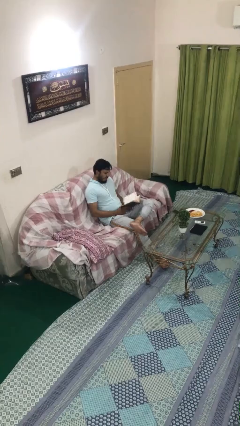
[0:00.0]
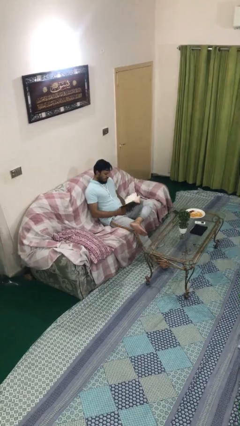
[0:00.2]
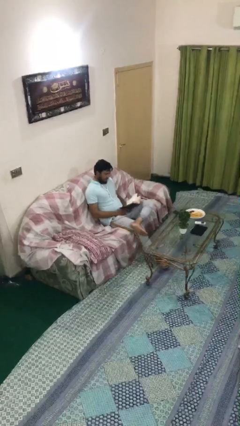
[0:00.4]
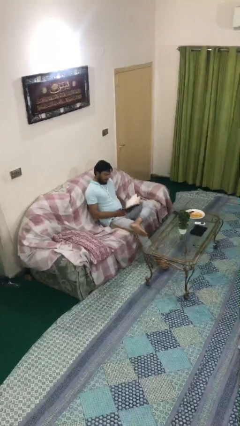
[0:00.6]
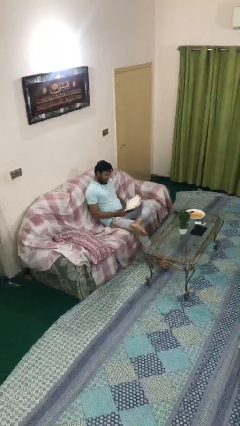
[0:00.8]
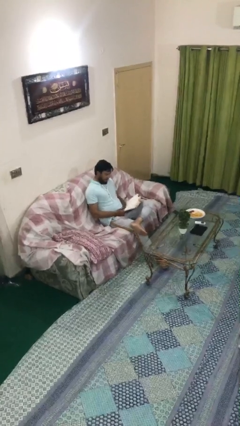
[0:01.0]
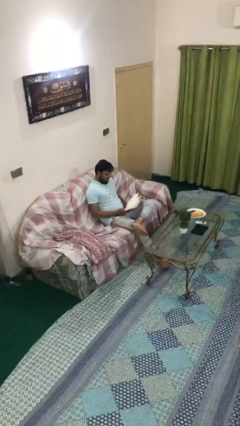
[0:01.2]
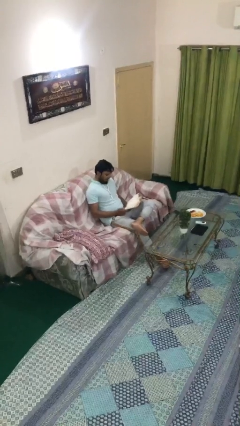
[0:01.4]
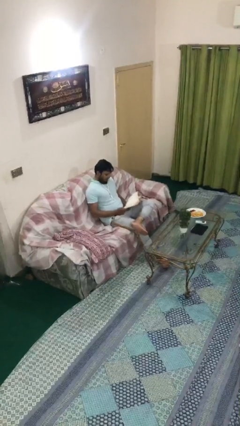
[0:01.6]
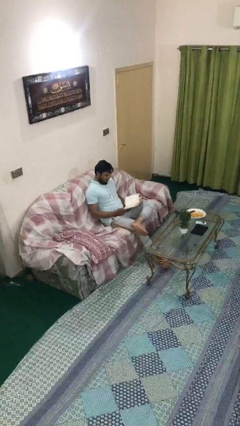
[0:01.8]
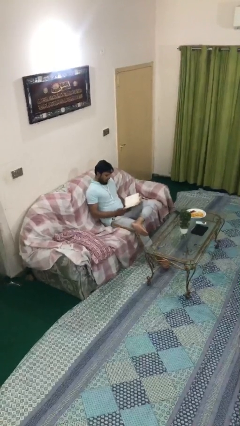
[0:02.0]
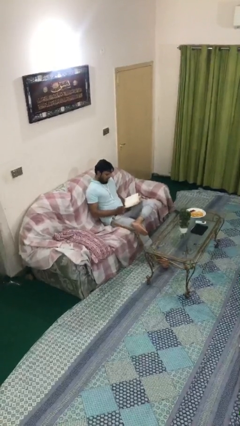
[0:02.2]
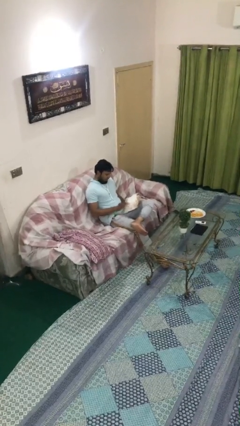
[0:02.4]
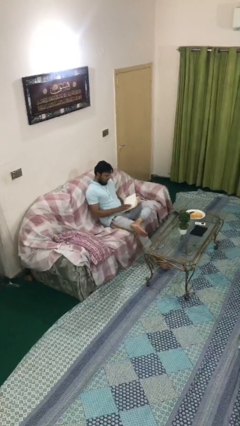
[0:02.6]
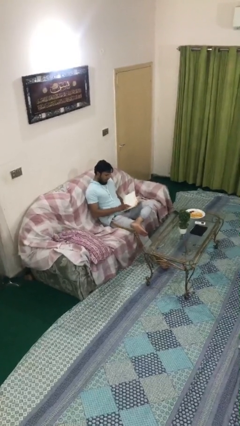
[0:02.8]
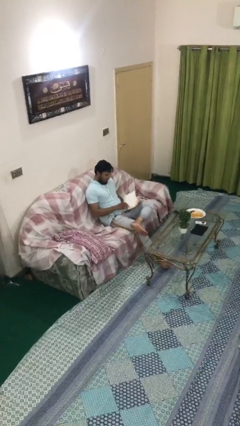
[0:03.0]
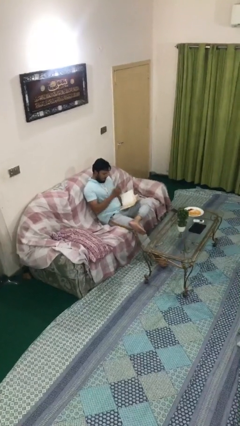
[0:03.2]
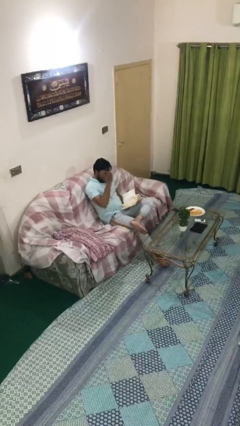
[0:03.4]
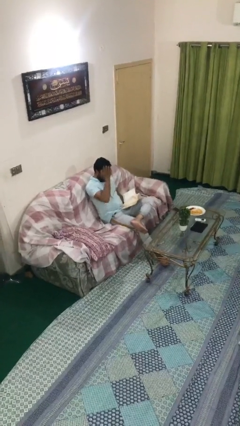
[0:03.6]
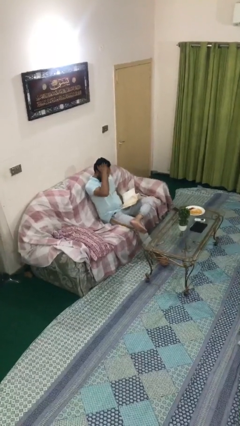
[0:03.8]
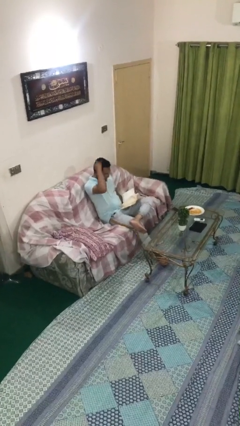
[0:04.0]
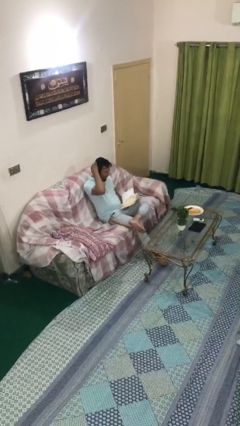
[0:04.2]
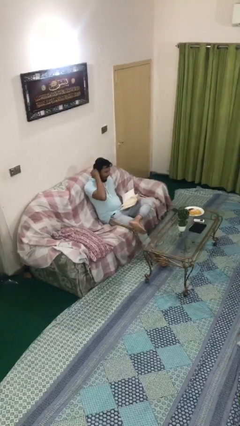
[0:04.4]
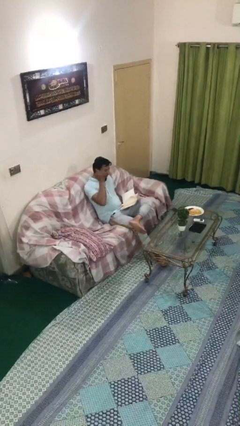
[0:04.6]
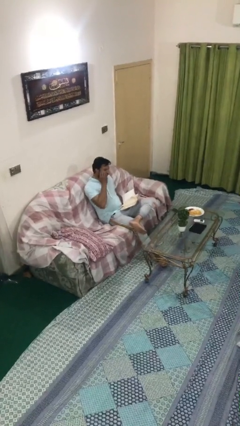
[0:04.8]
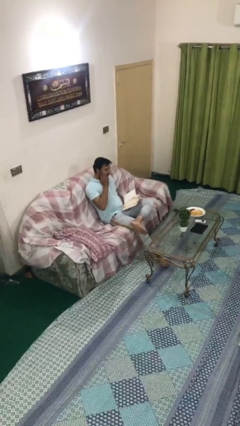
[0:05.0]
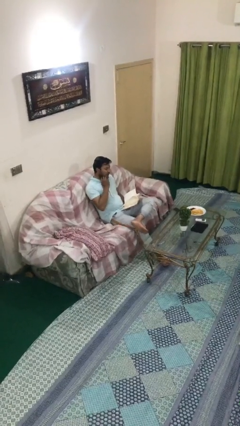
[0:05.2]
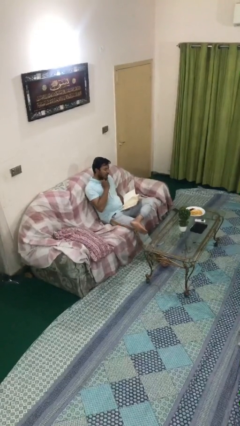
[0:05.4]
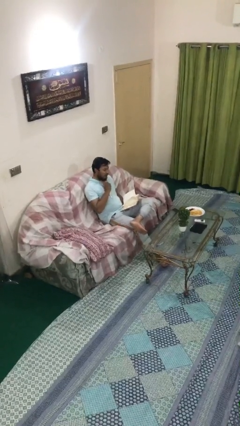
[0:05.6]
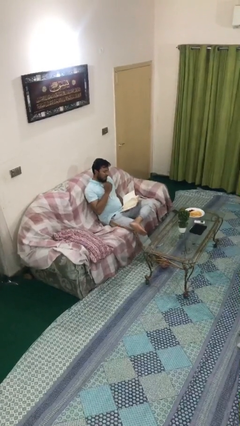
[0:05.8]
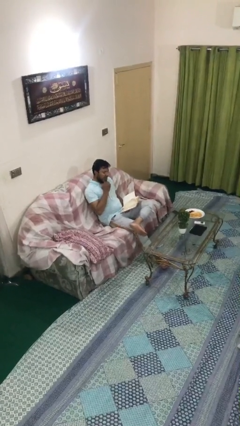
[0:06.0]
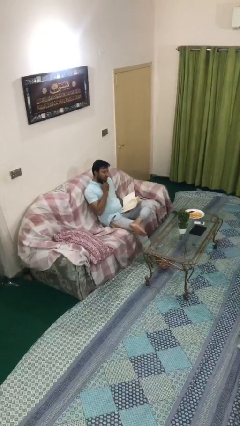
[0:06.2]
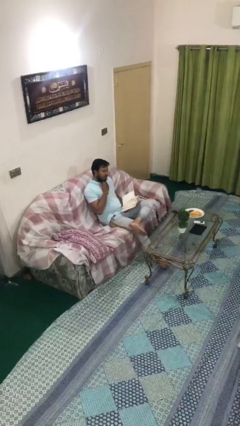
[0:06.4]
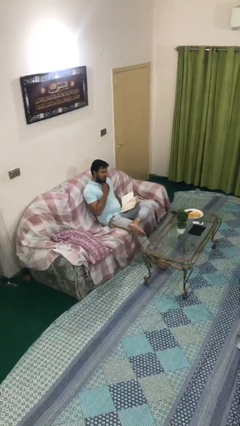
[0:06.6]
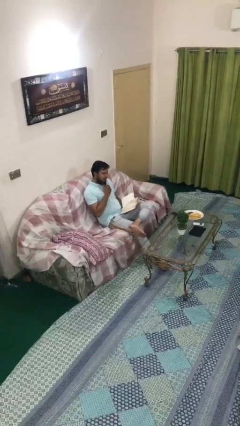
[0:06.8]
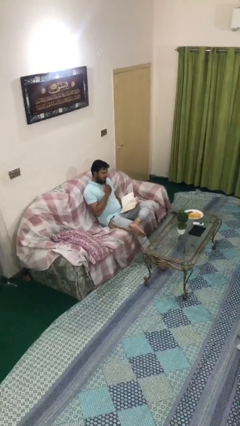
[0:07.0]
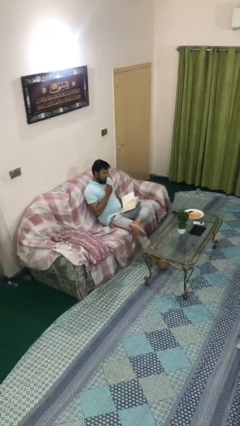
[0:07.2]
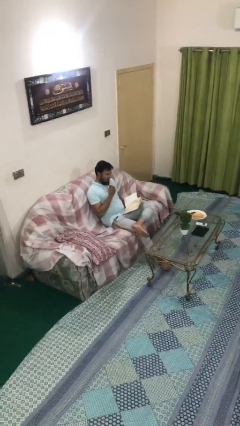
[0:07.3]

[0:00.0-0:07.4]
person reads document

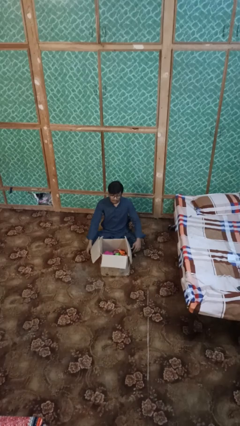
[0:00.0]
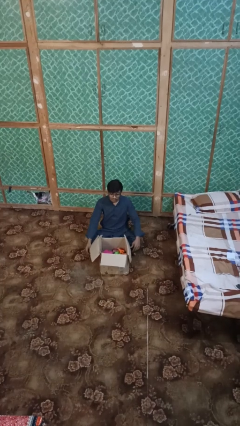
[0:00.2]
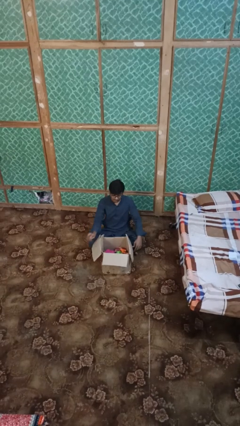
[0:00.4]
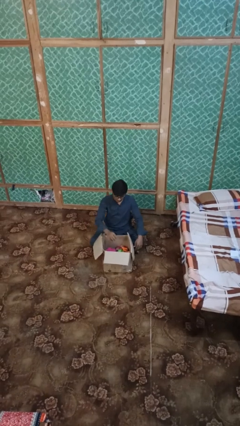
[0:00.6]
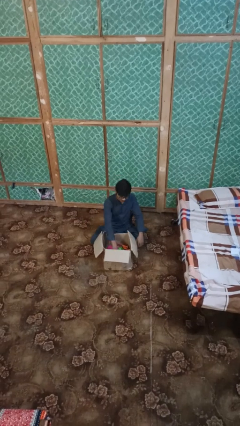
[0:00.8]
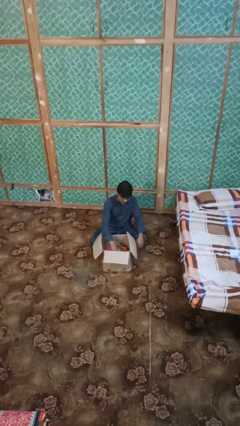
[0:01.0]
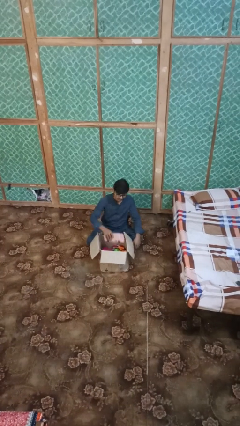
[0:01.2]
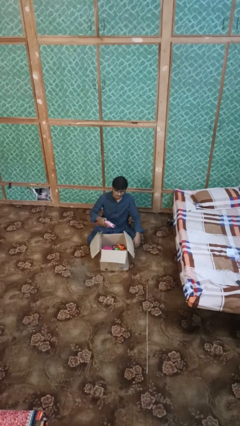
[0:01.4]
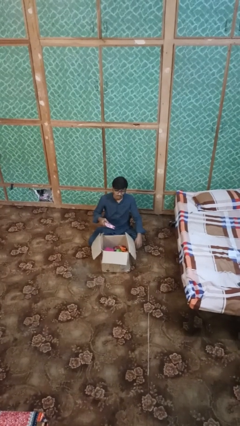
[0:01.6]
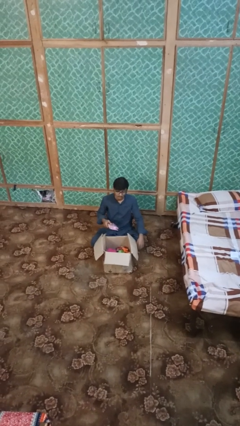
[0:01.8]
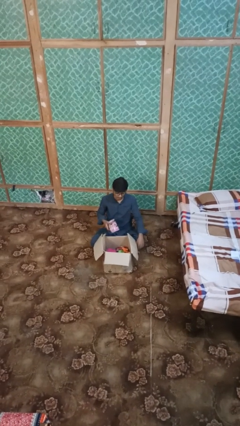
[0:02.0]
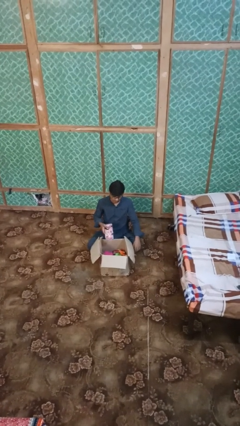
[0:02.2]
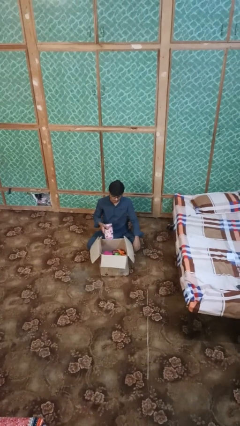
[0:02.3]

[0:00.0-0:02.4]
person takes object from box

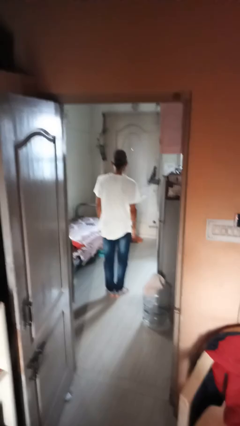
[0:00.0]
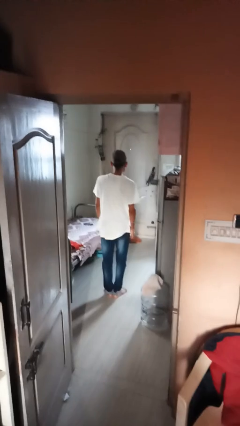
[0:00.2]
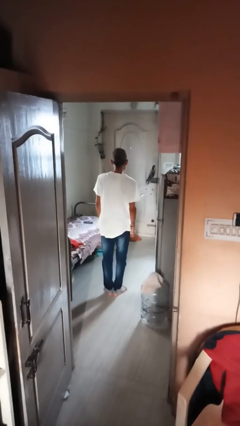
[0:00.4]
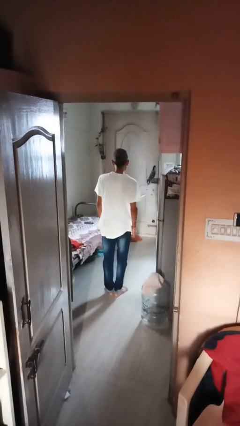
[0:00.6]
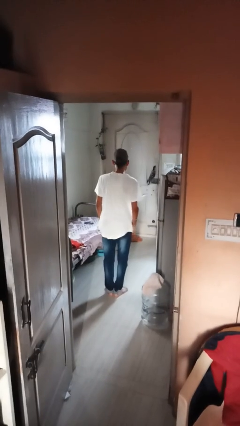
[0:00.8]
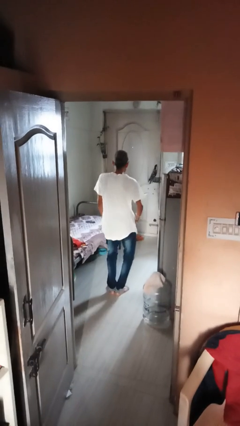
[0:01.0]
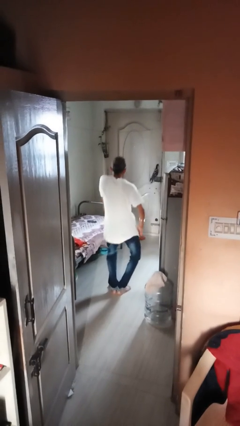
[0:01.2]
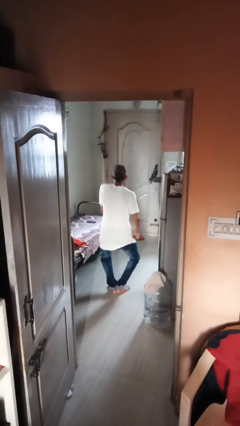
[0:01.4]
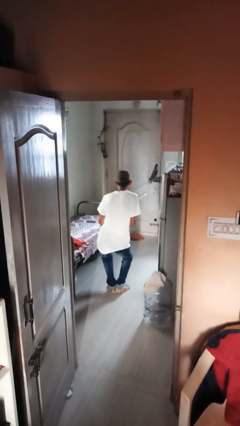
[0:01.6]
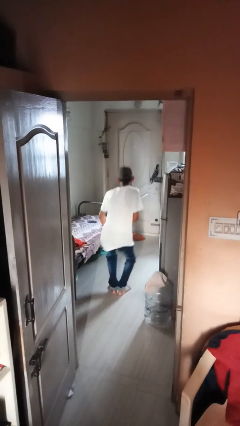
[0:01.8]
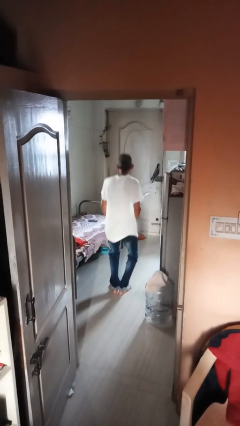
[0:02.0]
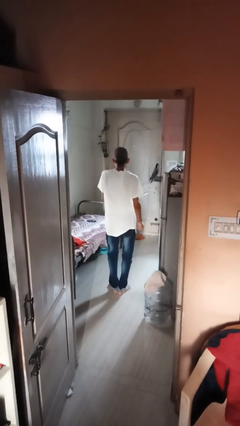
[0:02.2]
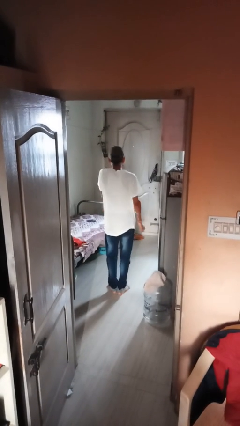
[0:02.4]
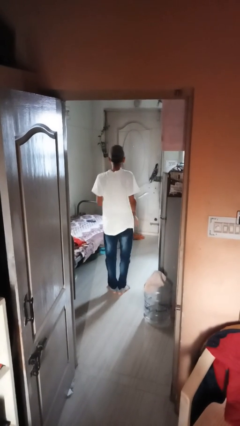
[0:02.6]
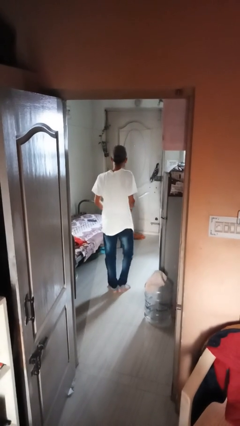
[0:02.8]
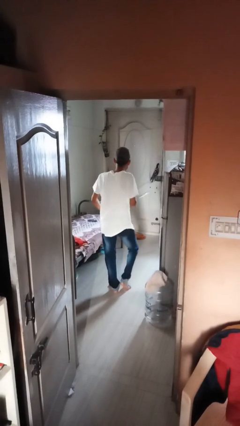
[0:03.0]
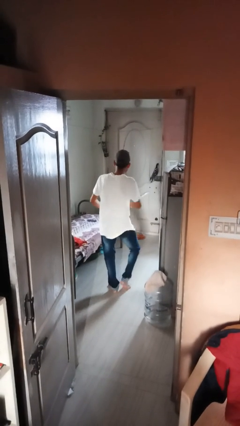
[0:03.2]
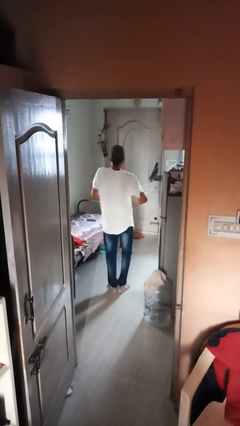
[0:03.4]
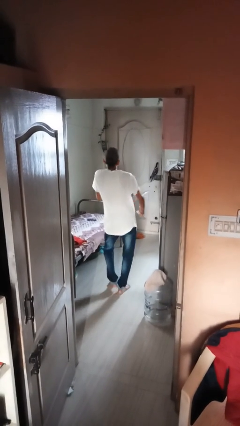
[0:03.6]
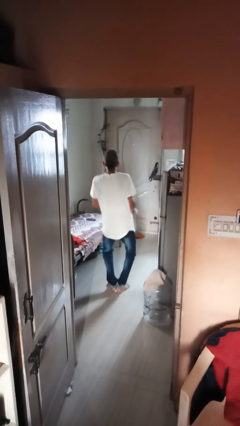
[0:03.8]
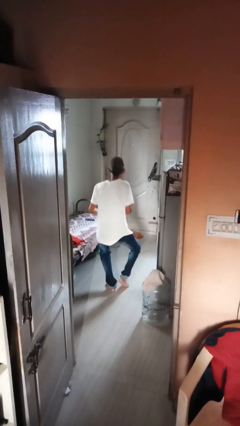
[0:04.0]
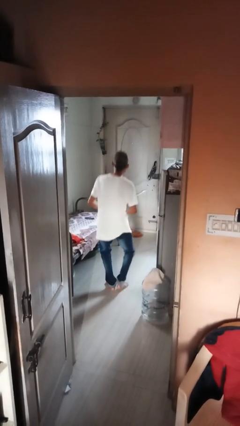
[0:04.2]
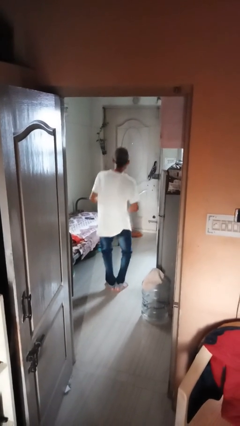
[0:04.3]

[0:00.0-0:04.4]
person dances in place

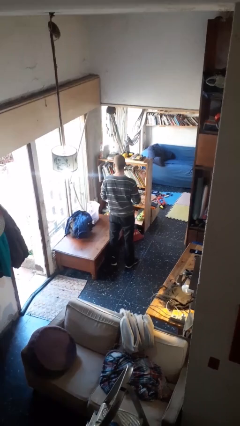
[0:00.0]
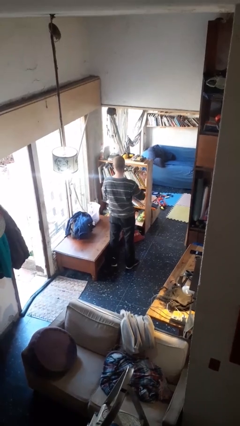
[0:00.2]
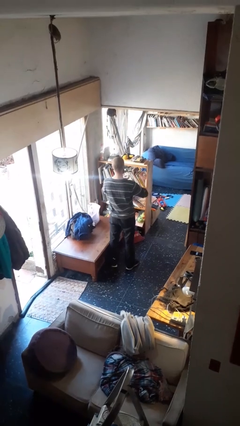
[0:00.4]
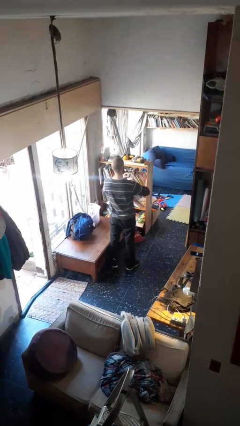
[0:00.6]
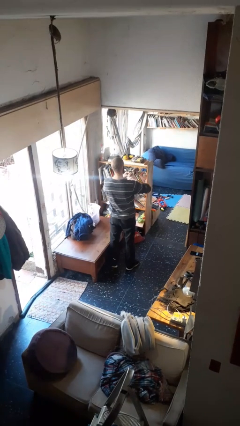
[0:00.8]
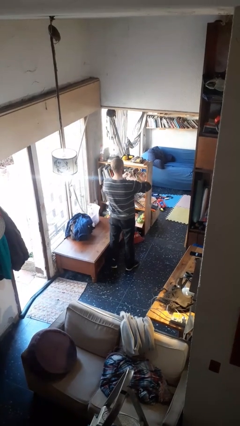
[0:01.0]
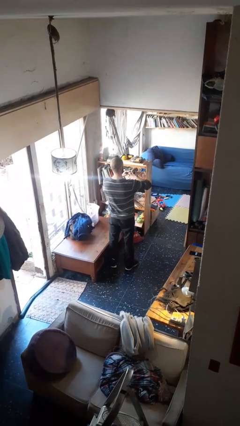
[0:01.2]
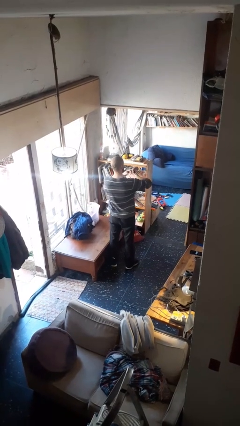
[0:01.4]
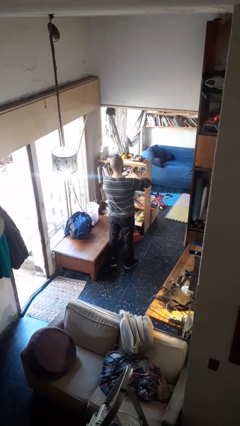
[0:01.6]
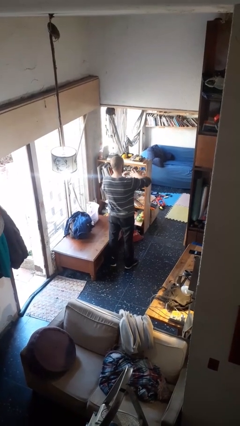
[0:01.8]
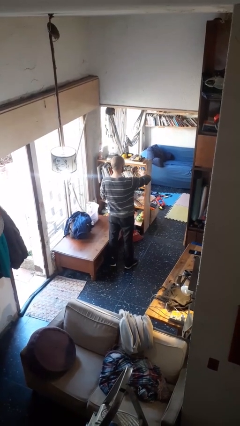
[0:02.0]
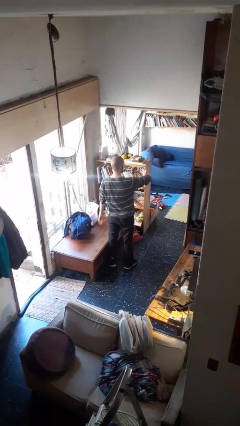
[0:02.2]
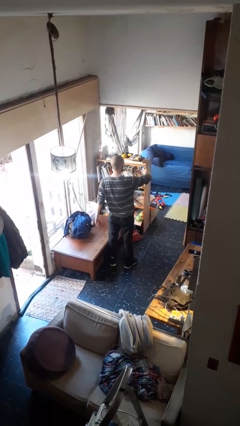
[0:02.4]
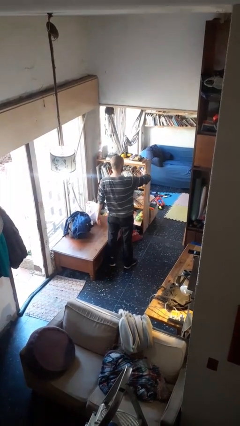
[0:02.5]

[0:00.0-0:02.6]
person puts on ring

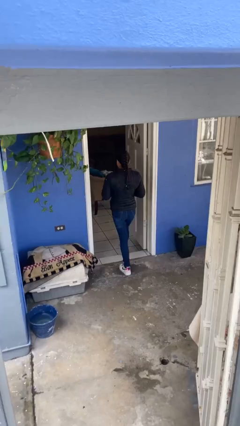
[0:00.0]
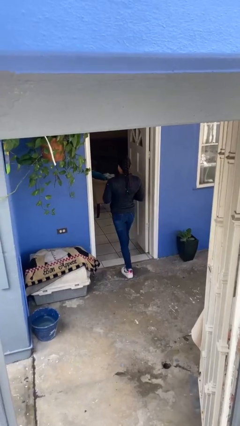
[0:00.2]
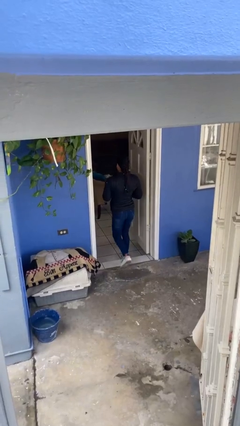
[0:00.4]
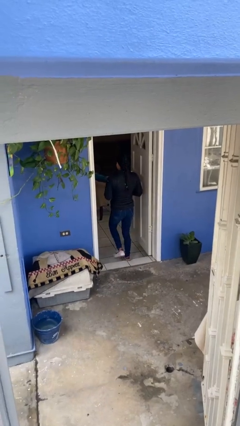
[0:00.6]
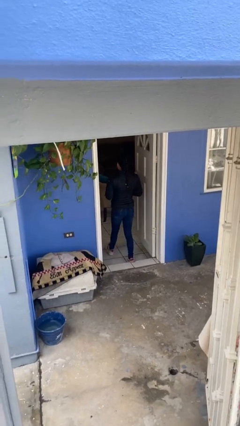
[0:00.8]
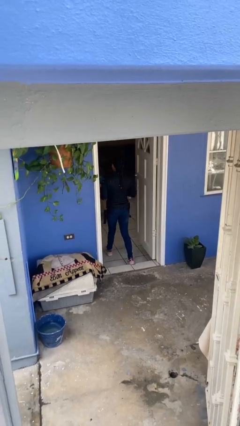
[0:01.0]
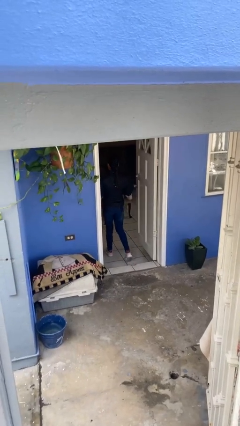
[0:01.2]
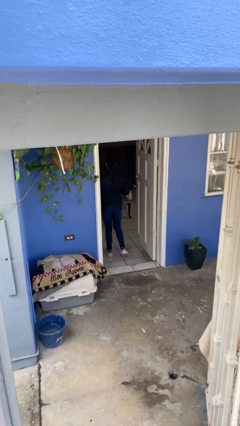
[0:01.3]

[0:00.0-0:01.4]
person exits scene through structure
